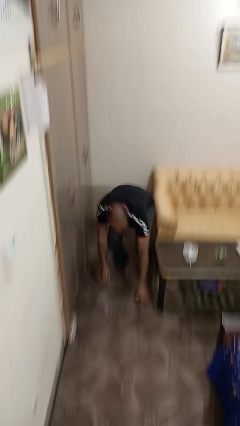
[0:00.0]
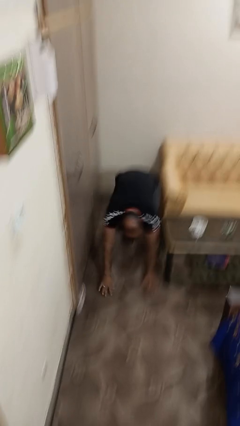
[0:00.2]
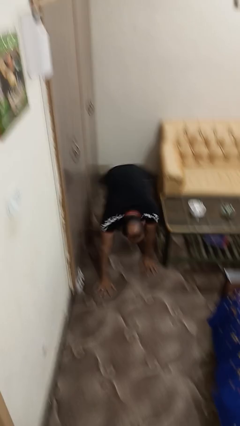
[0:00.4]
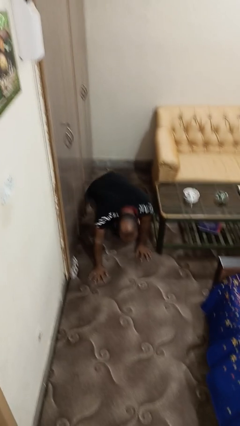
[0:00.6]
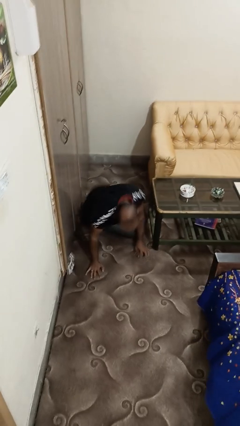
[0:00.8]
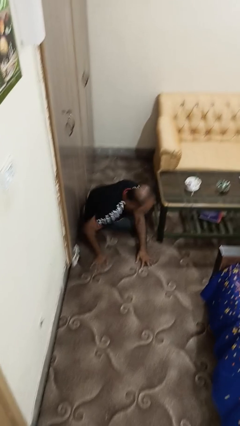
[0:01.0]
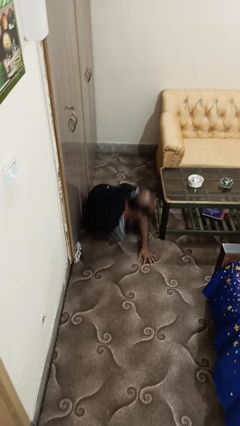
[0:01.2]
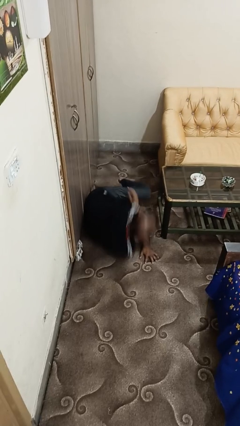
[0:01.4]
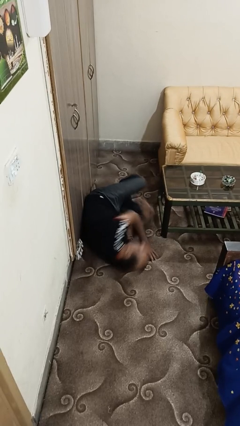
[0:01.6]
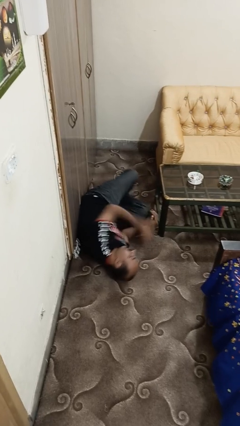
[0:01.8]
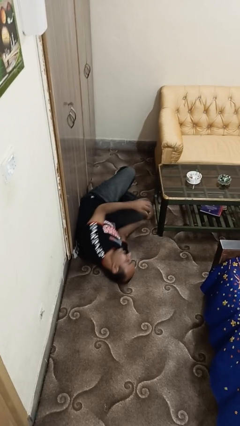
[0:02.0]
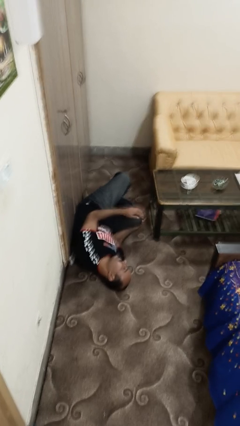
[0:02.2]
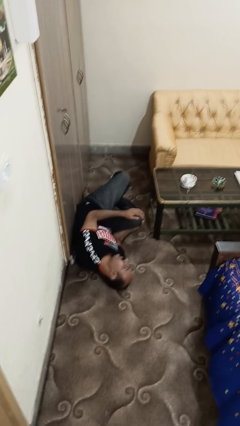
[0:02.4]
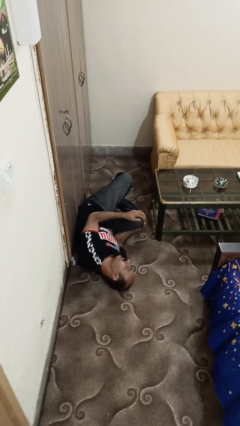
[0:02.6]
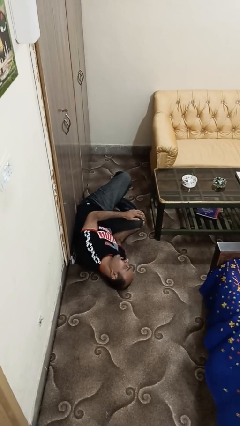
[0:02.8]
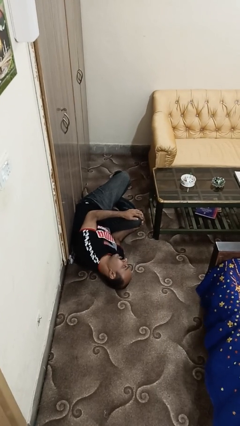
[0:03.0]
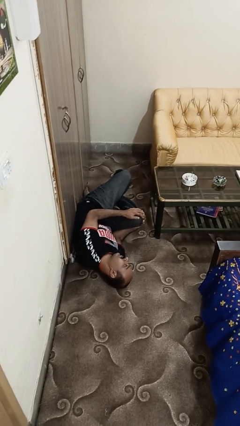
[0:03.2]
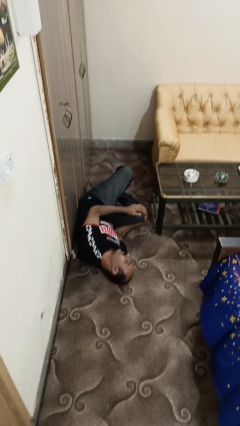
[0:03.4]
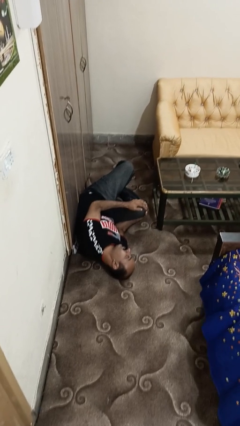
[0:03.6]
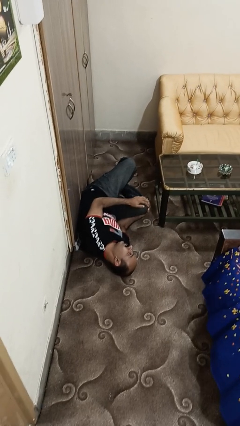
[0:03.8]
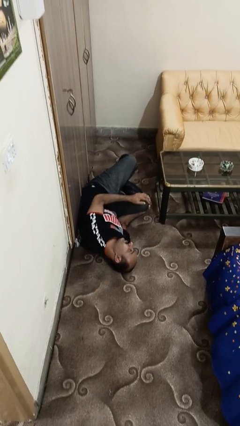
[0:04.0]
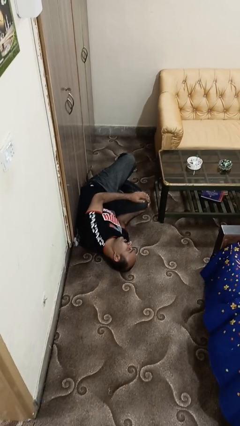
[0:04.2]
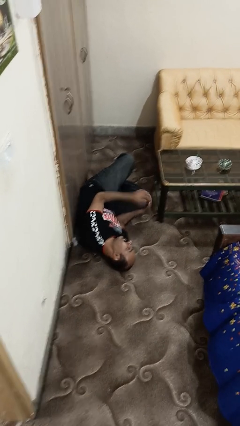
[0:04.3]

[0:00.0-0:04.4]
person lies down on floor

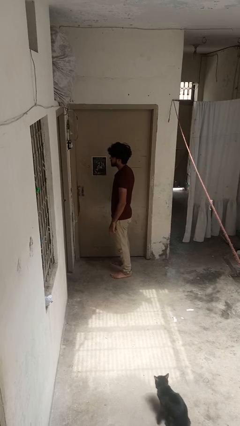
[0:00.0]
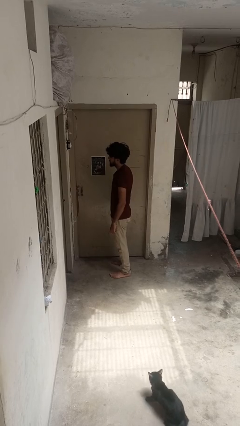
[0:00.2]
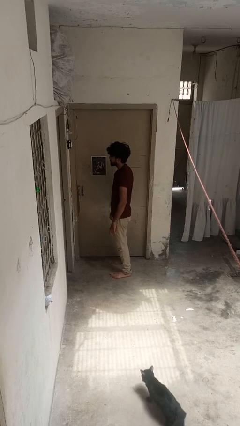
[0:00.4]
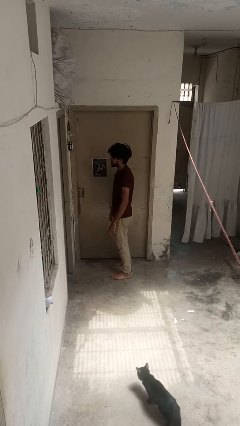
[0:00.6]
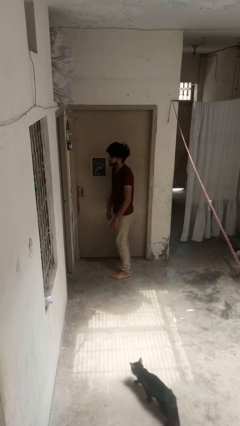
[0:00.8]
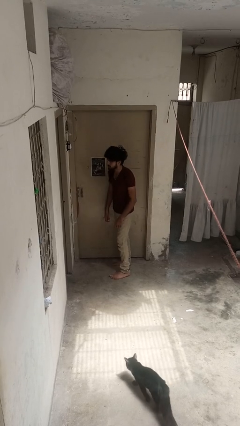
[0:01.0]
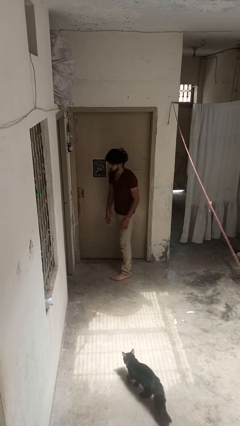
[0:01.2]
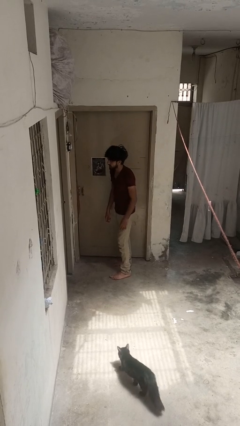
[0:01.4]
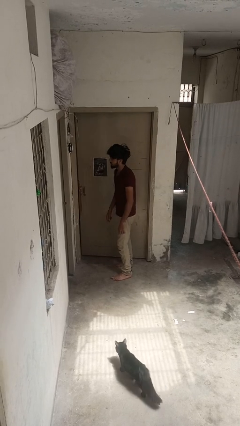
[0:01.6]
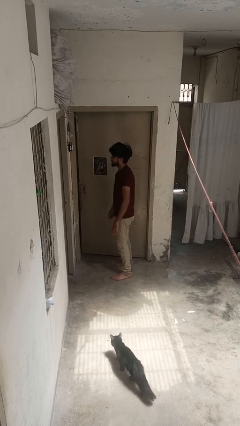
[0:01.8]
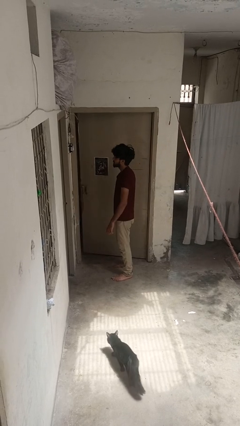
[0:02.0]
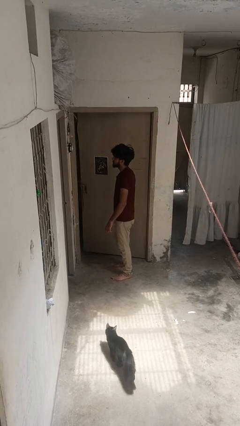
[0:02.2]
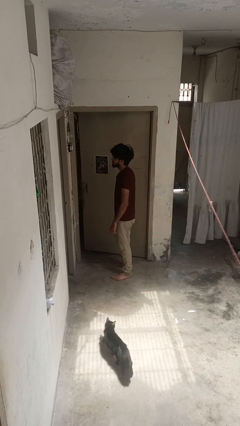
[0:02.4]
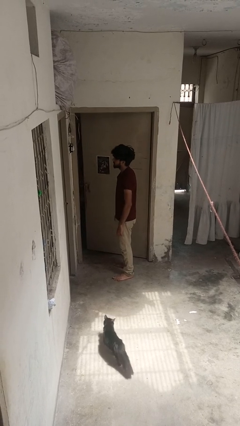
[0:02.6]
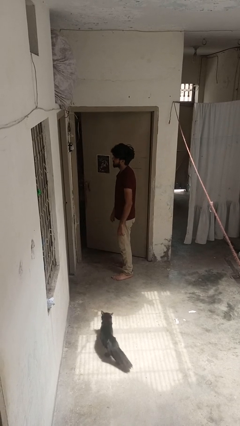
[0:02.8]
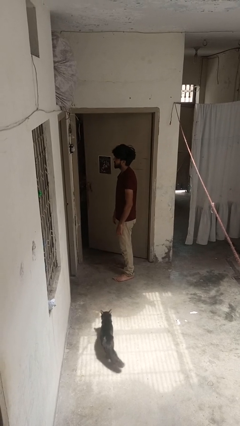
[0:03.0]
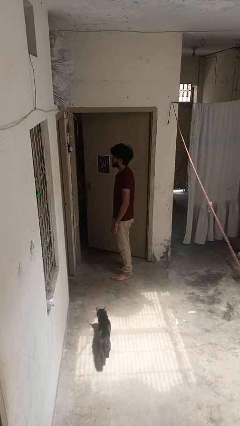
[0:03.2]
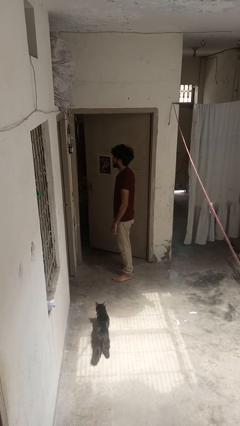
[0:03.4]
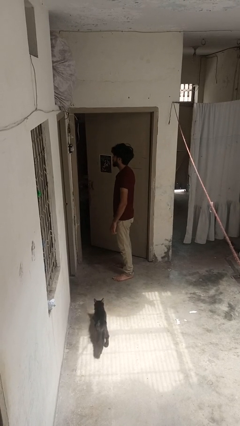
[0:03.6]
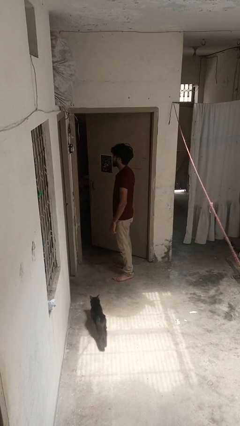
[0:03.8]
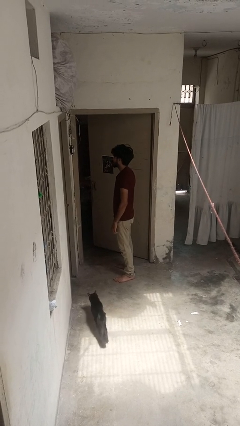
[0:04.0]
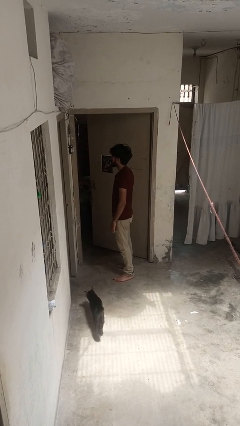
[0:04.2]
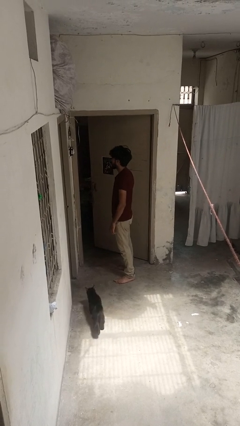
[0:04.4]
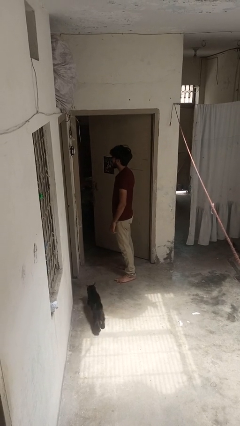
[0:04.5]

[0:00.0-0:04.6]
person opens facility door

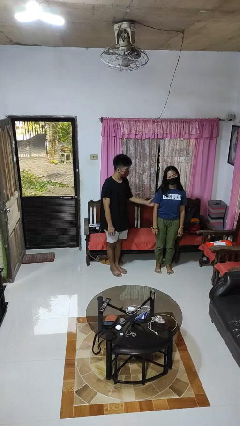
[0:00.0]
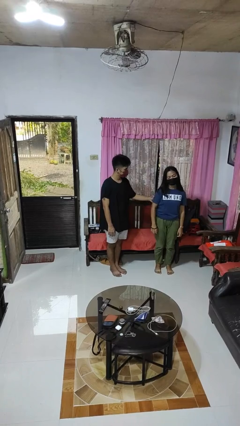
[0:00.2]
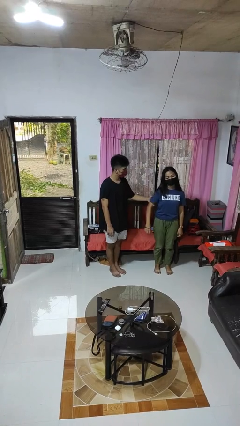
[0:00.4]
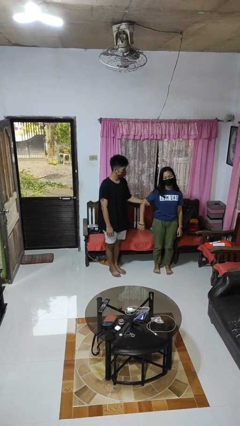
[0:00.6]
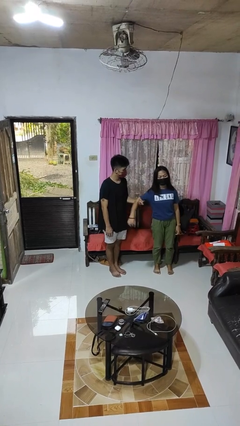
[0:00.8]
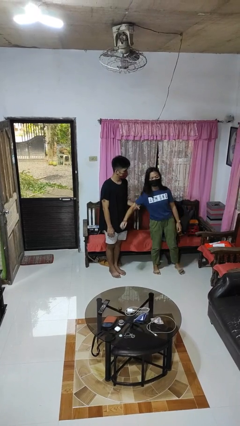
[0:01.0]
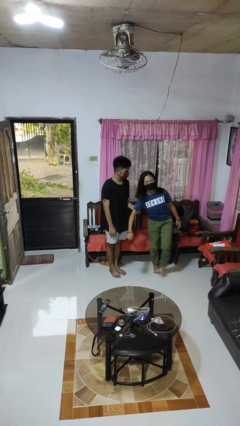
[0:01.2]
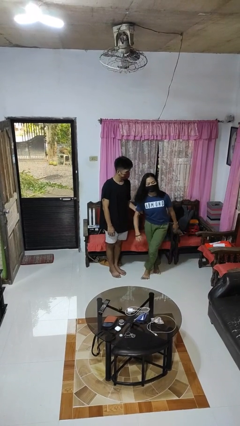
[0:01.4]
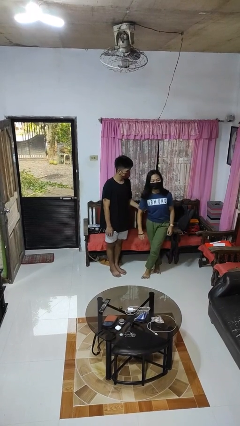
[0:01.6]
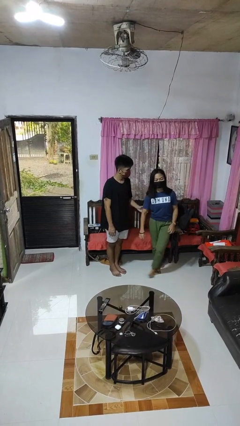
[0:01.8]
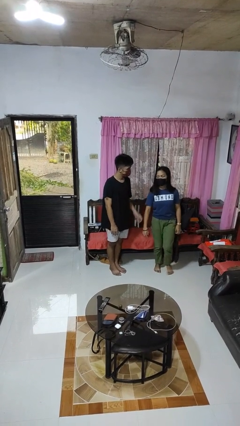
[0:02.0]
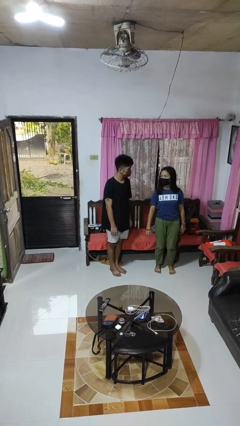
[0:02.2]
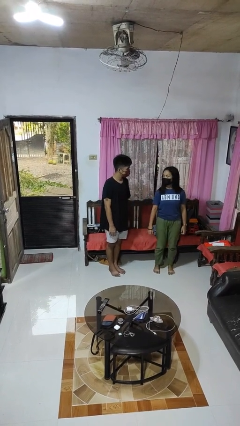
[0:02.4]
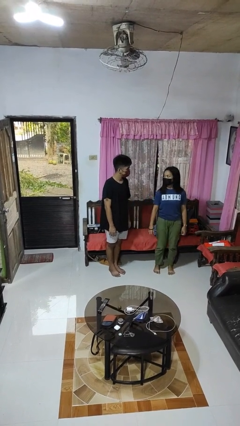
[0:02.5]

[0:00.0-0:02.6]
person grabs person by bicep

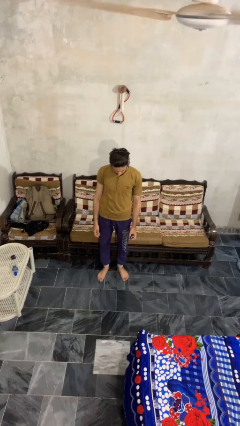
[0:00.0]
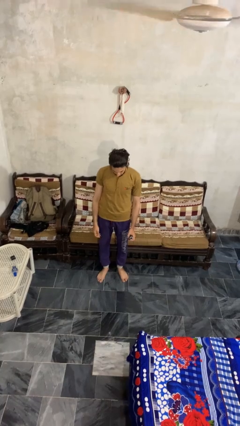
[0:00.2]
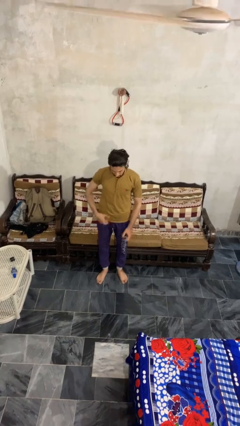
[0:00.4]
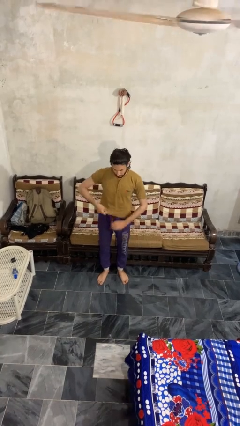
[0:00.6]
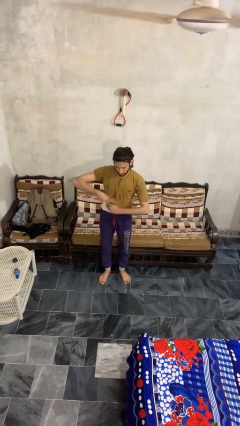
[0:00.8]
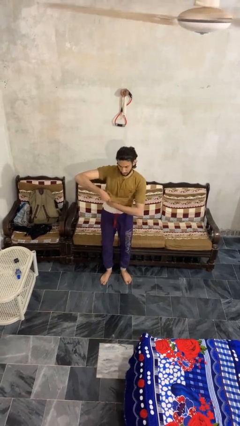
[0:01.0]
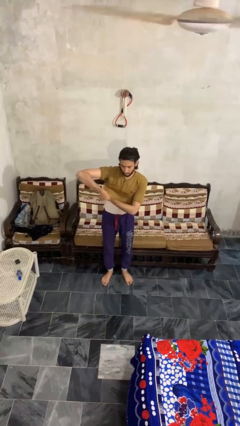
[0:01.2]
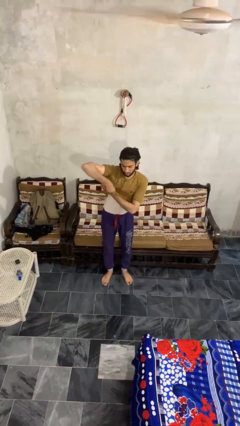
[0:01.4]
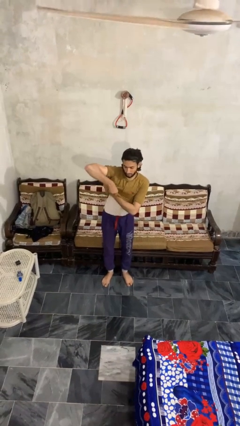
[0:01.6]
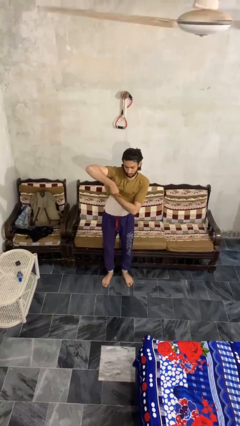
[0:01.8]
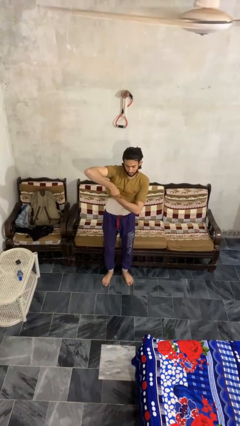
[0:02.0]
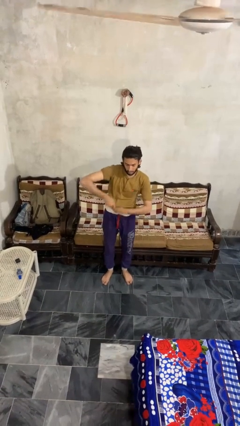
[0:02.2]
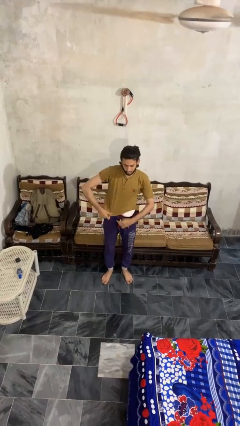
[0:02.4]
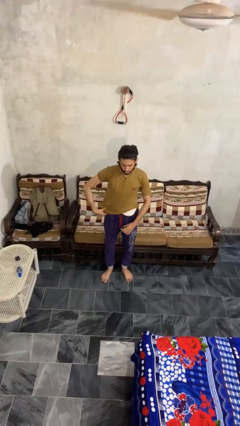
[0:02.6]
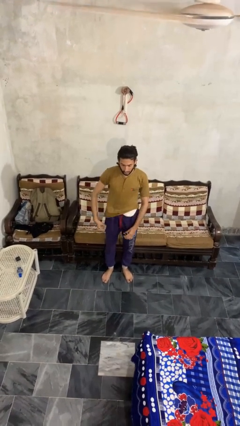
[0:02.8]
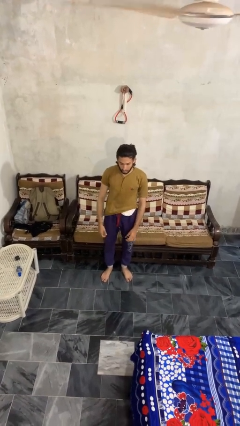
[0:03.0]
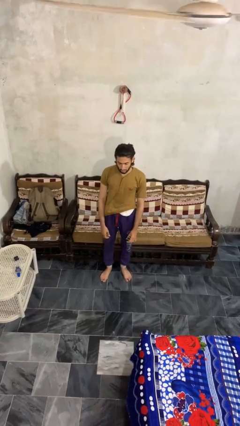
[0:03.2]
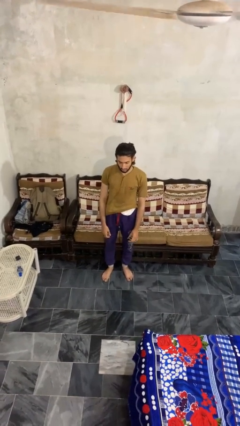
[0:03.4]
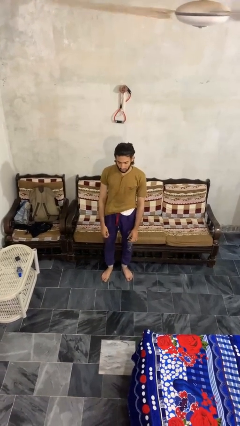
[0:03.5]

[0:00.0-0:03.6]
person applies deodorant

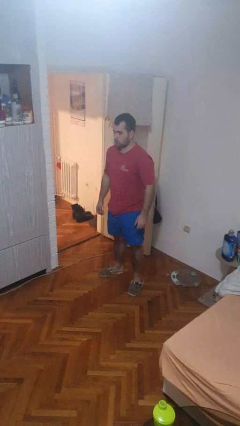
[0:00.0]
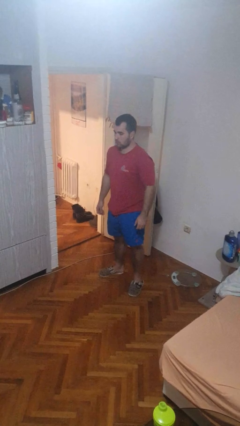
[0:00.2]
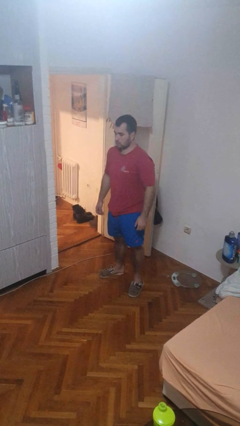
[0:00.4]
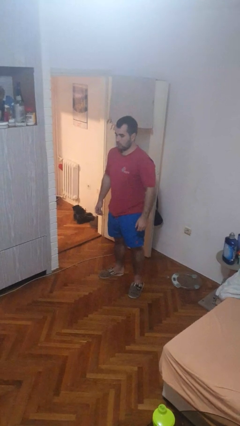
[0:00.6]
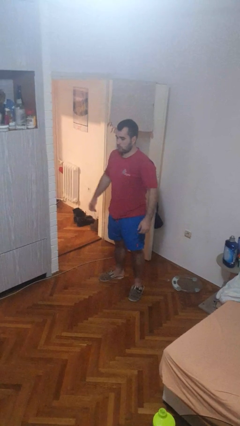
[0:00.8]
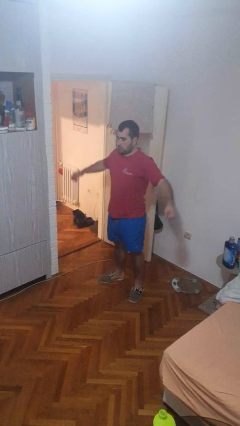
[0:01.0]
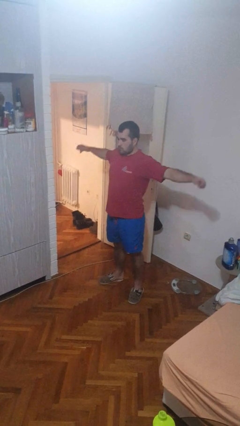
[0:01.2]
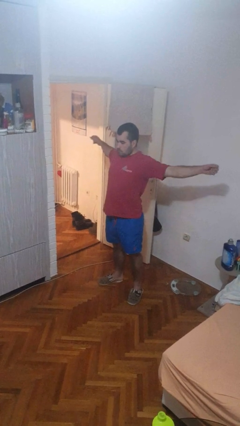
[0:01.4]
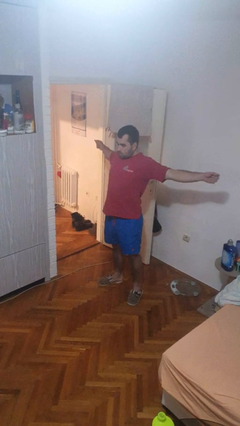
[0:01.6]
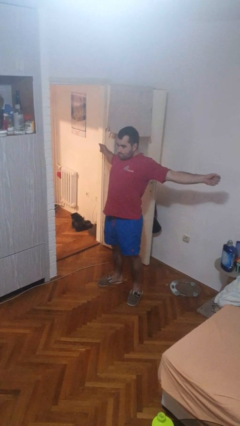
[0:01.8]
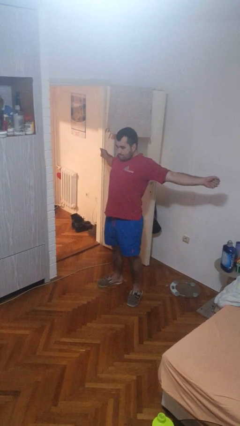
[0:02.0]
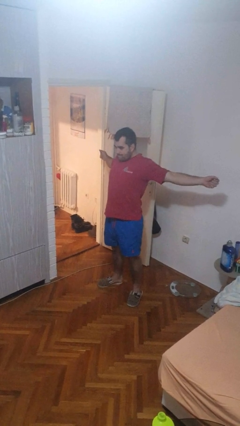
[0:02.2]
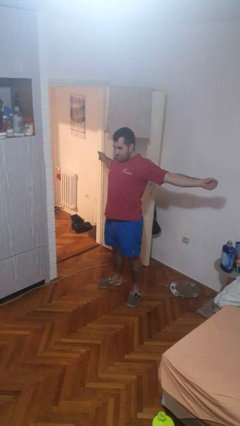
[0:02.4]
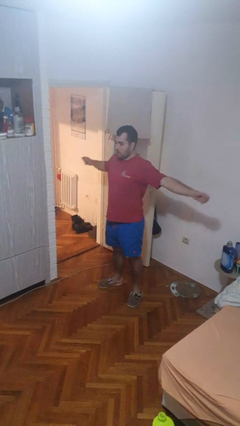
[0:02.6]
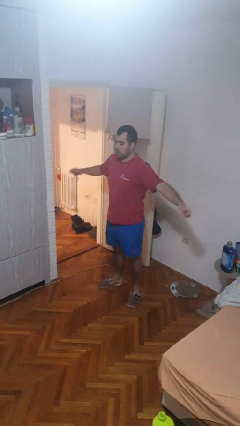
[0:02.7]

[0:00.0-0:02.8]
person stretches arms to side
